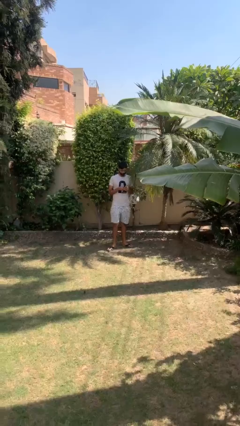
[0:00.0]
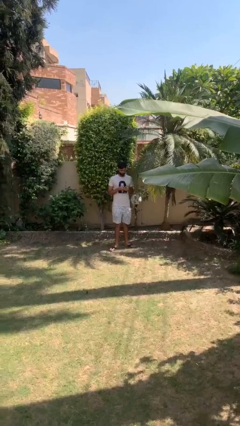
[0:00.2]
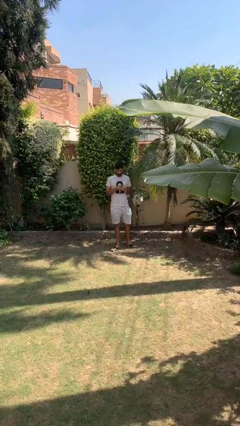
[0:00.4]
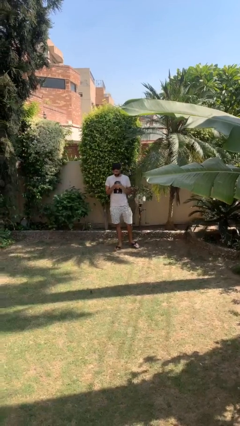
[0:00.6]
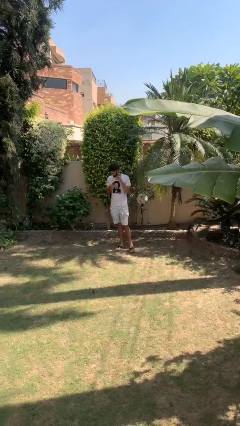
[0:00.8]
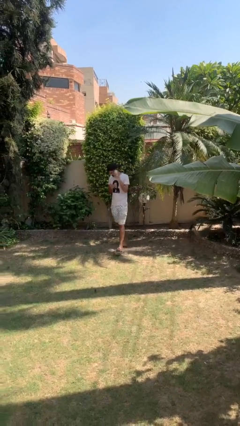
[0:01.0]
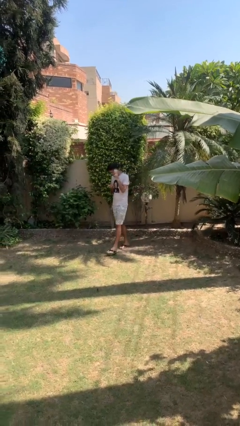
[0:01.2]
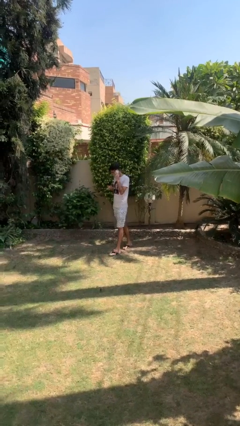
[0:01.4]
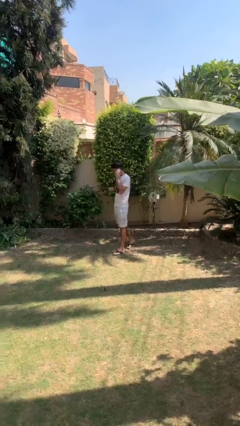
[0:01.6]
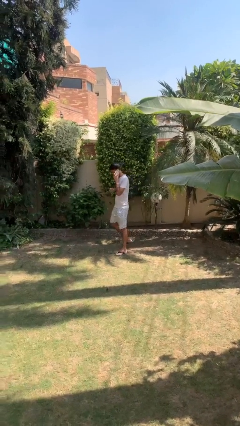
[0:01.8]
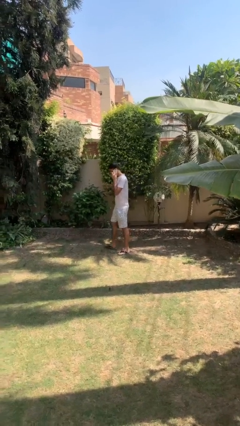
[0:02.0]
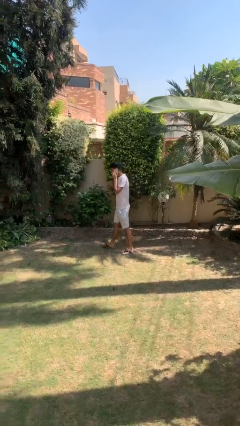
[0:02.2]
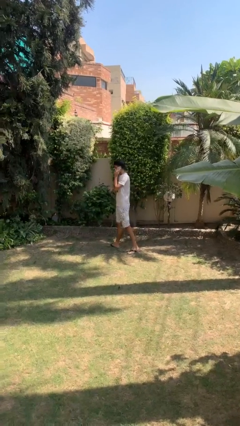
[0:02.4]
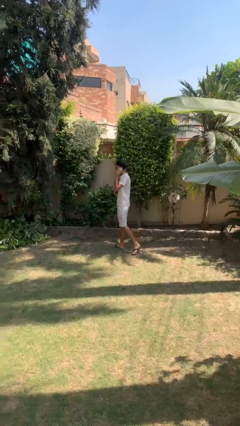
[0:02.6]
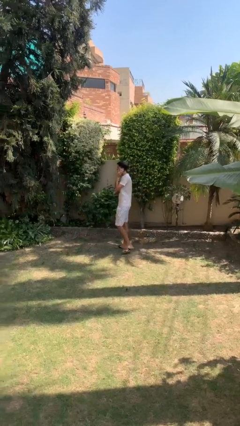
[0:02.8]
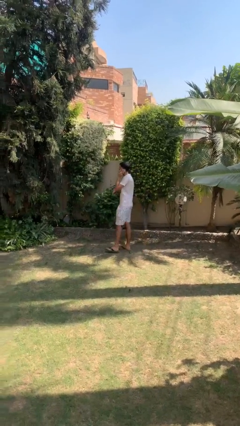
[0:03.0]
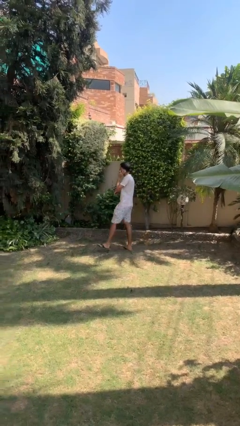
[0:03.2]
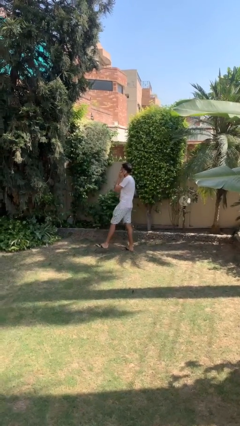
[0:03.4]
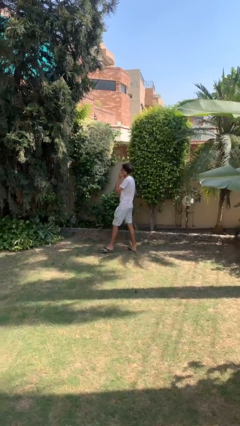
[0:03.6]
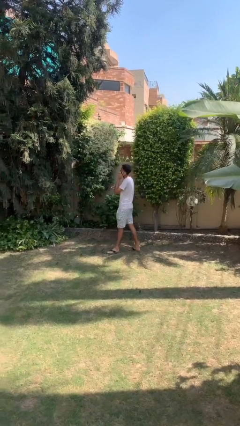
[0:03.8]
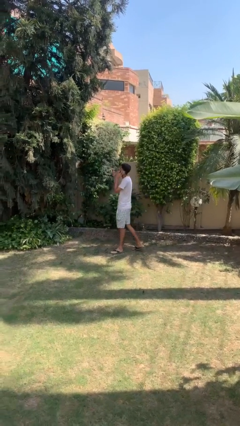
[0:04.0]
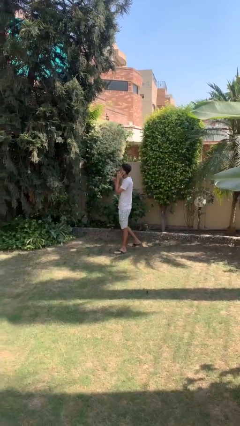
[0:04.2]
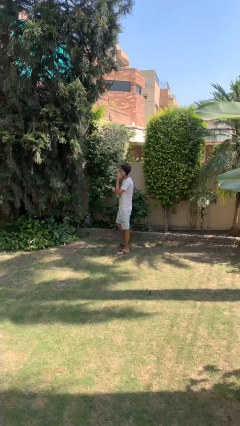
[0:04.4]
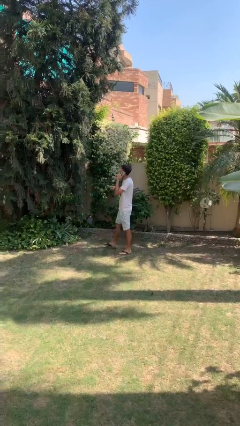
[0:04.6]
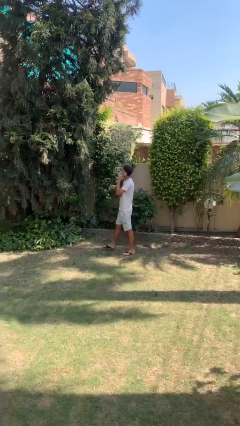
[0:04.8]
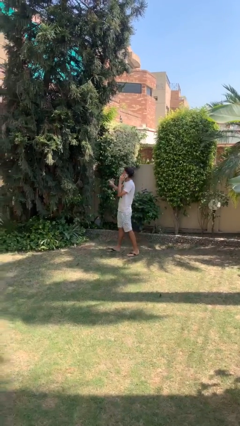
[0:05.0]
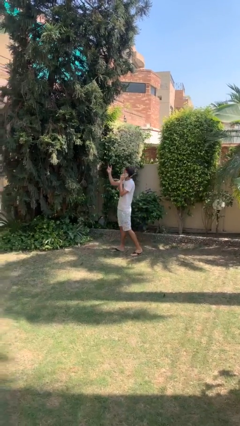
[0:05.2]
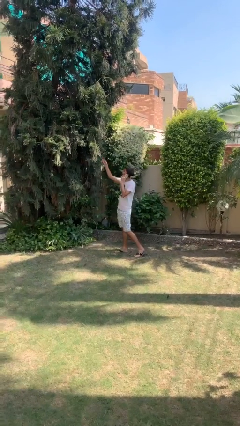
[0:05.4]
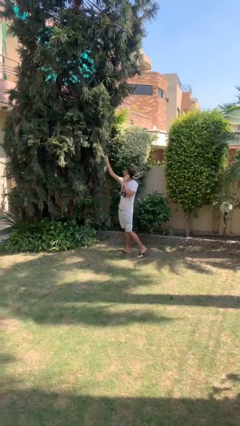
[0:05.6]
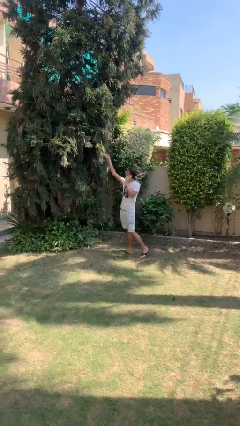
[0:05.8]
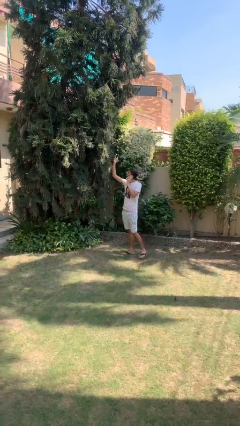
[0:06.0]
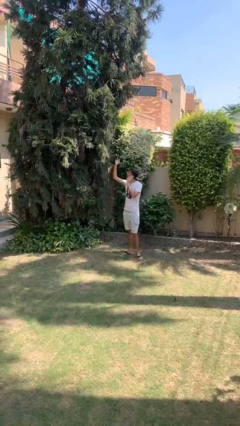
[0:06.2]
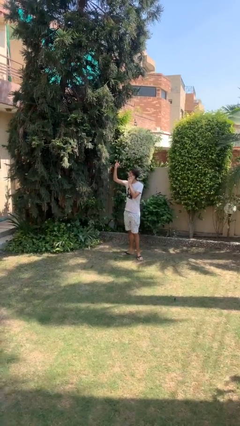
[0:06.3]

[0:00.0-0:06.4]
person talks on phone

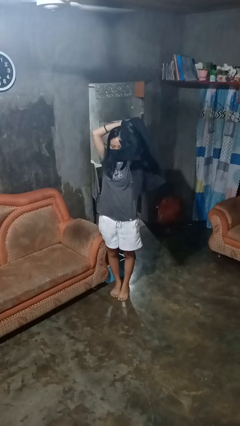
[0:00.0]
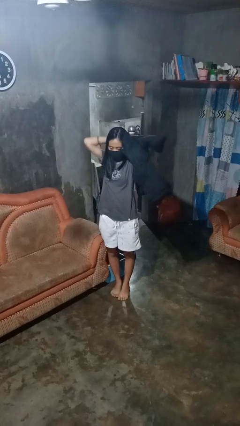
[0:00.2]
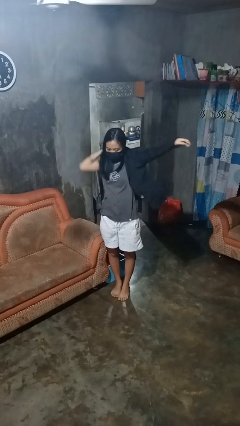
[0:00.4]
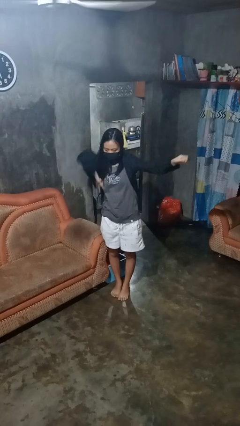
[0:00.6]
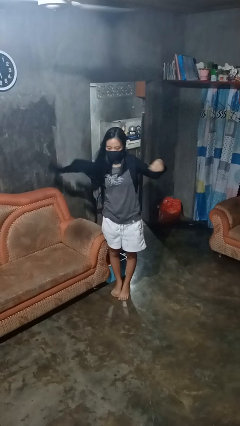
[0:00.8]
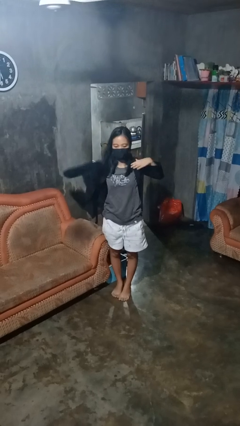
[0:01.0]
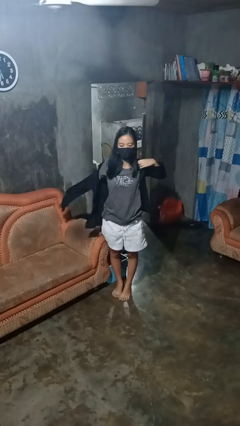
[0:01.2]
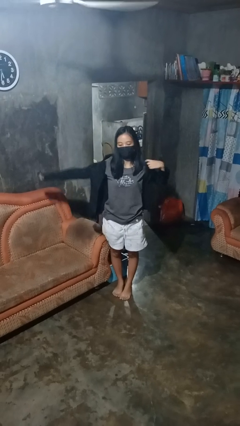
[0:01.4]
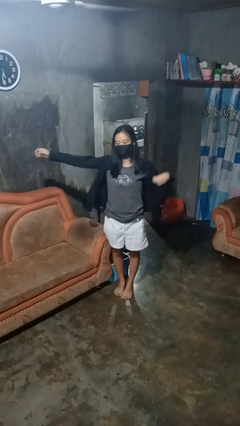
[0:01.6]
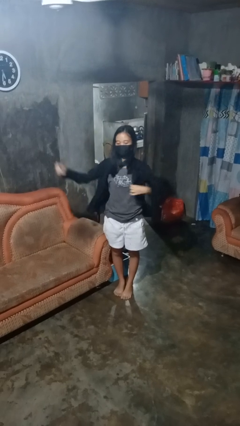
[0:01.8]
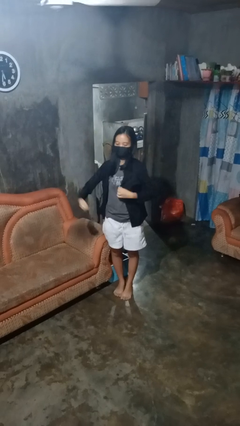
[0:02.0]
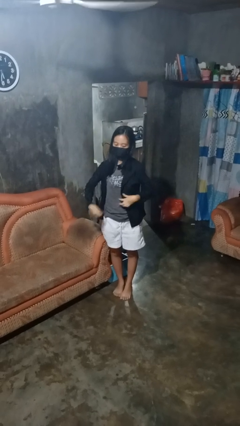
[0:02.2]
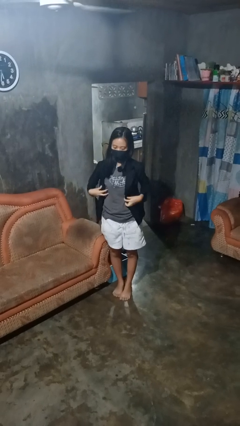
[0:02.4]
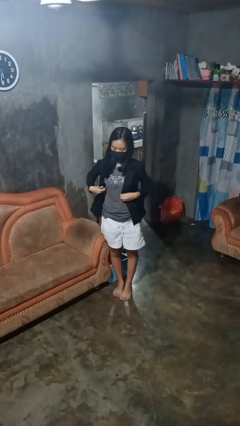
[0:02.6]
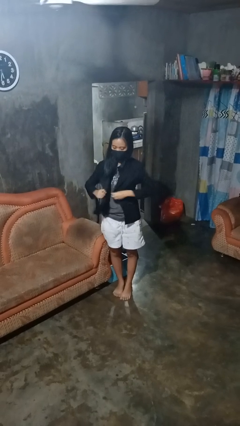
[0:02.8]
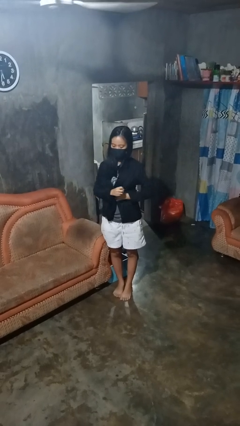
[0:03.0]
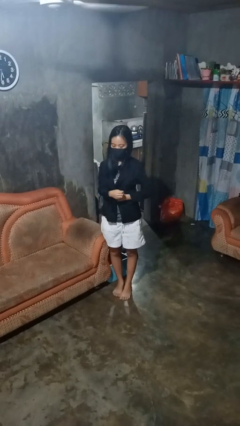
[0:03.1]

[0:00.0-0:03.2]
person puts on shirt

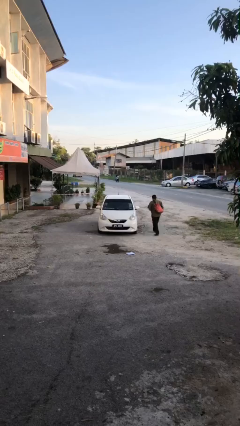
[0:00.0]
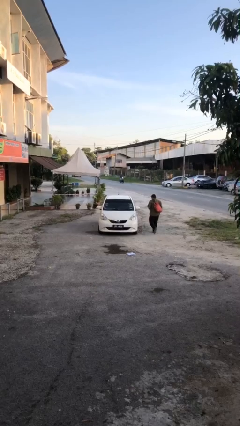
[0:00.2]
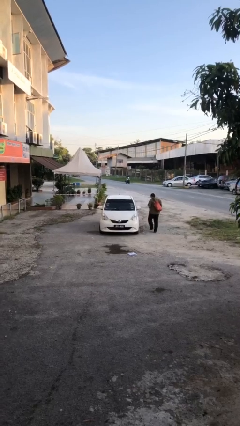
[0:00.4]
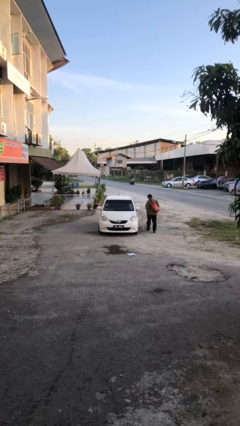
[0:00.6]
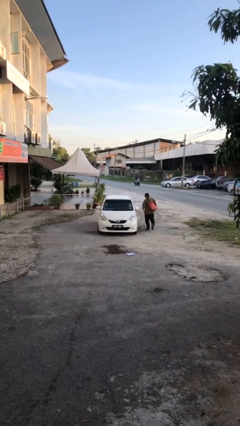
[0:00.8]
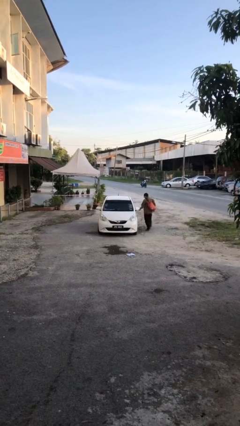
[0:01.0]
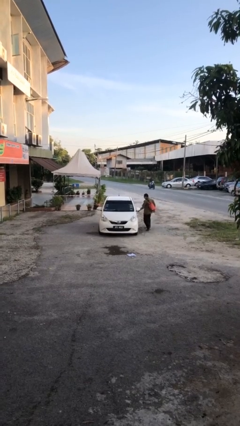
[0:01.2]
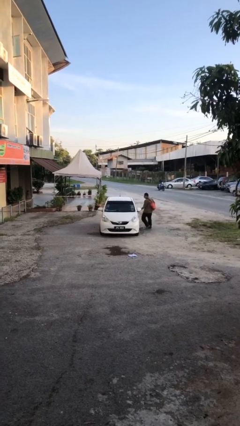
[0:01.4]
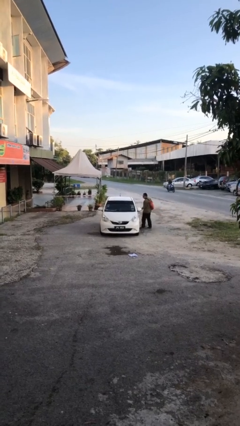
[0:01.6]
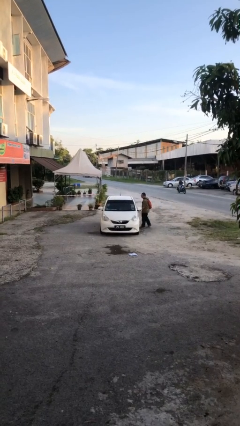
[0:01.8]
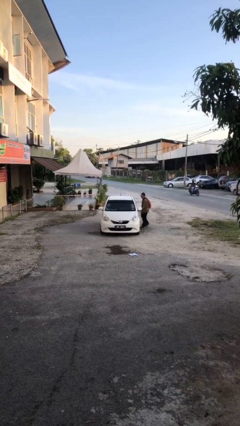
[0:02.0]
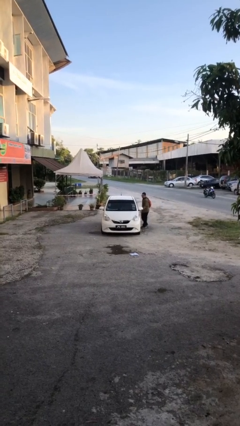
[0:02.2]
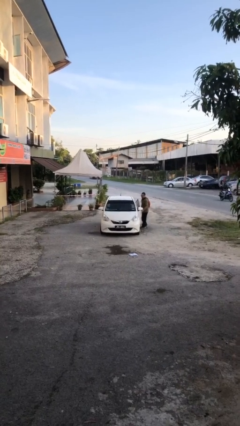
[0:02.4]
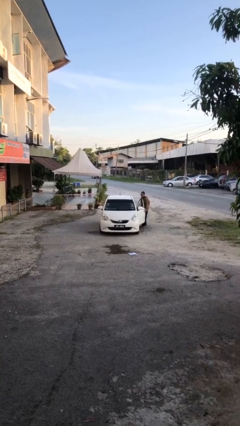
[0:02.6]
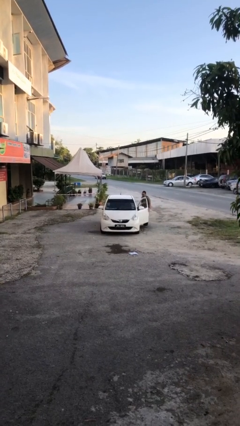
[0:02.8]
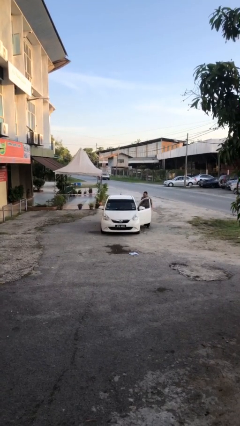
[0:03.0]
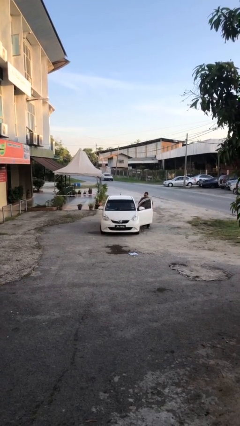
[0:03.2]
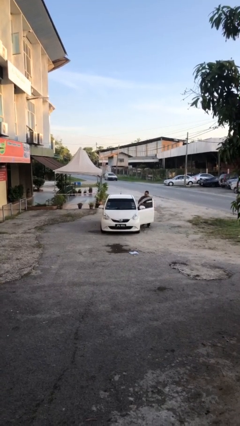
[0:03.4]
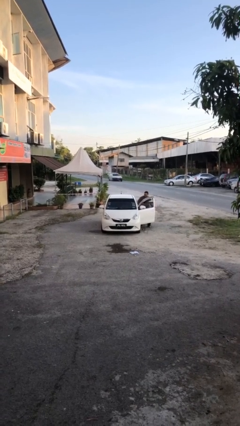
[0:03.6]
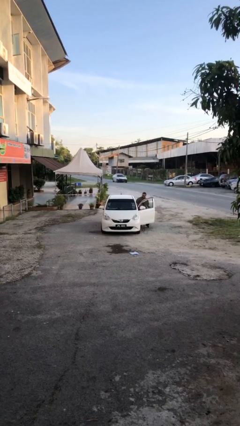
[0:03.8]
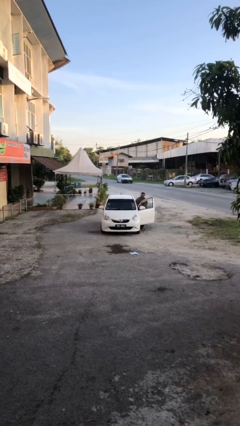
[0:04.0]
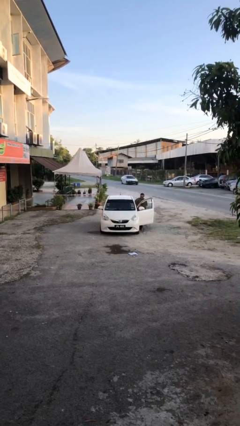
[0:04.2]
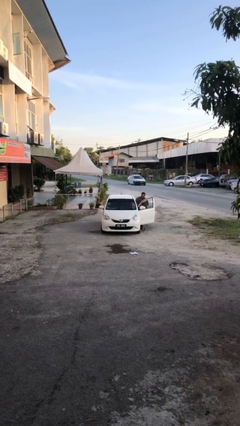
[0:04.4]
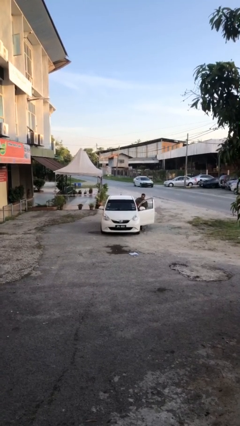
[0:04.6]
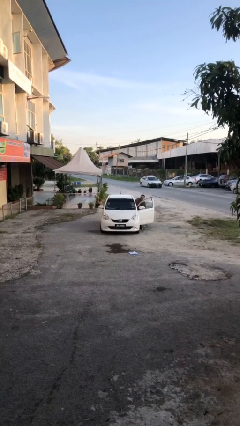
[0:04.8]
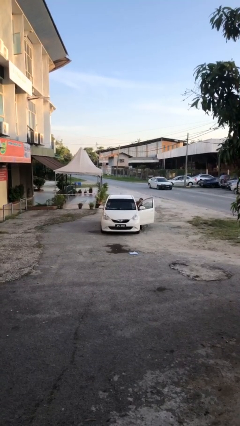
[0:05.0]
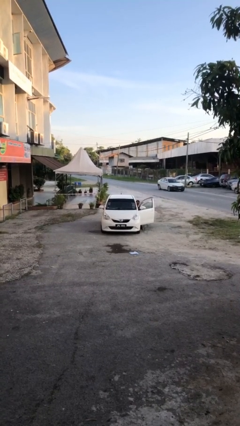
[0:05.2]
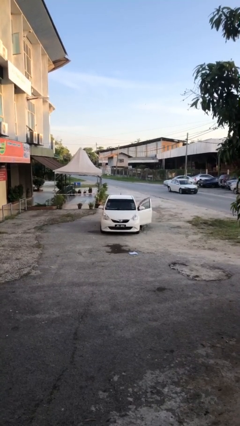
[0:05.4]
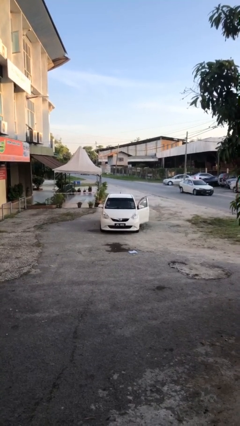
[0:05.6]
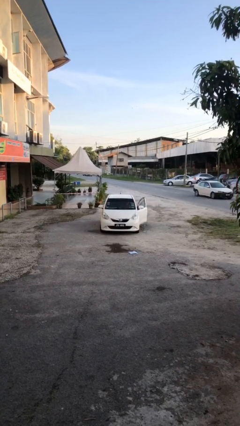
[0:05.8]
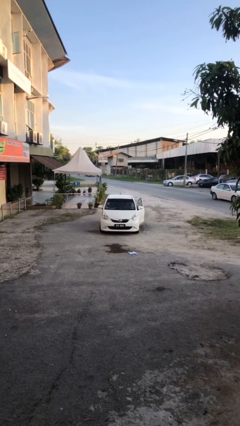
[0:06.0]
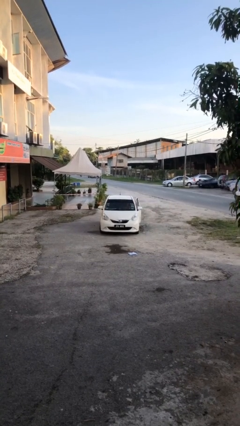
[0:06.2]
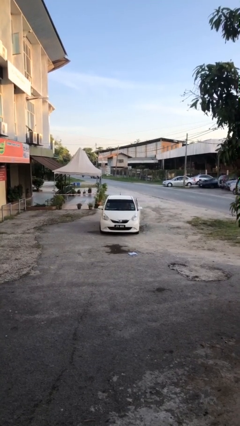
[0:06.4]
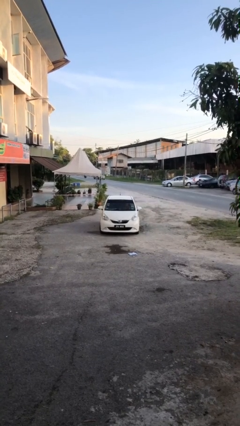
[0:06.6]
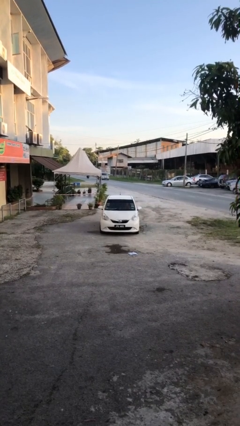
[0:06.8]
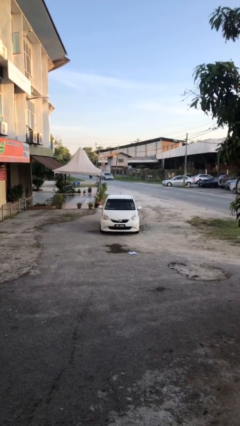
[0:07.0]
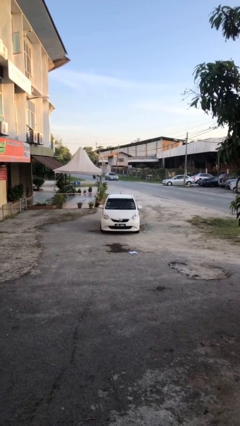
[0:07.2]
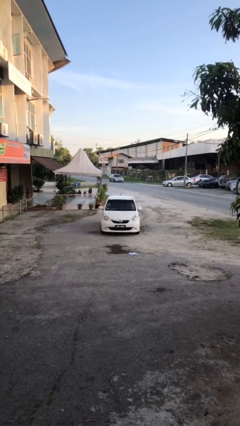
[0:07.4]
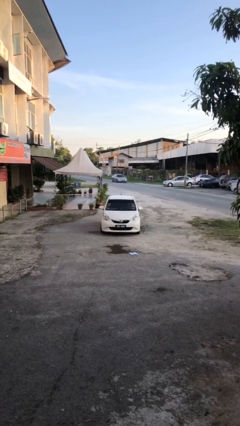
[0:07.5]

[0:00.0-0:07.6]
car picks up person

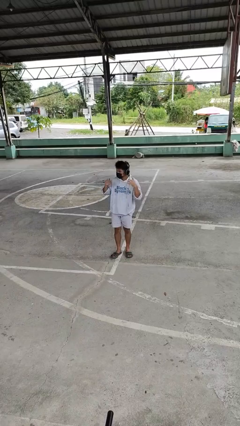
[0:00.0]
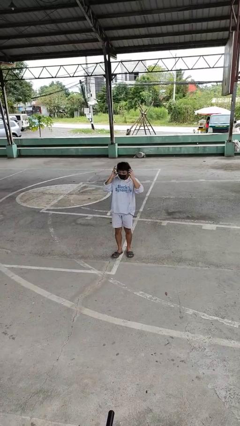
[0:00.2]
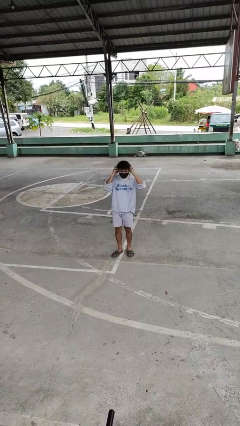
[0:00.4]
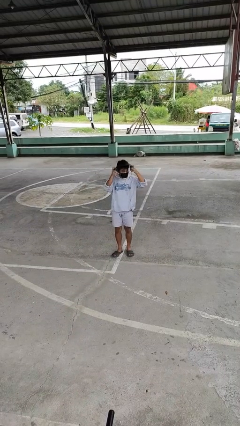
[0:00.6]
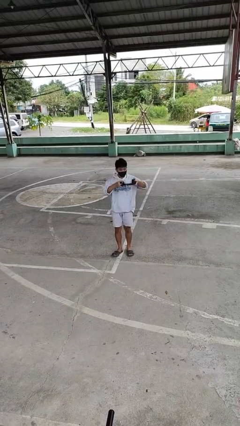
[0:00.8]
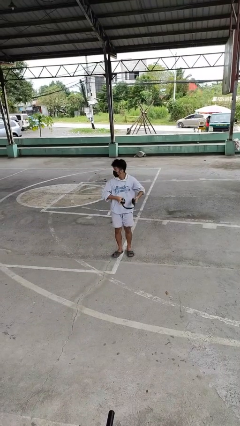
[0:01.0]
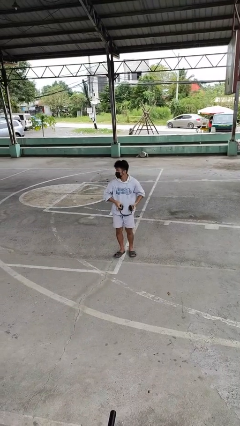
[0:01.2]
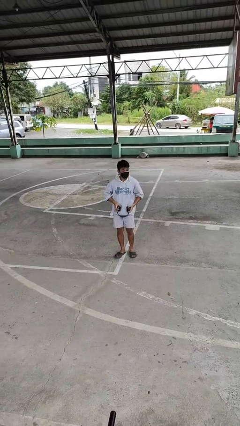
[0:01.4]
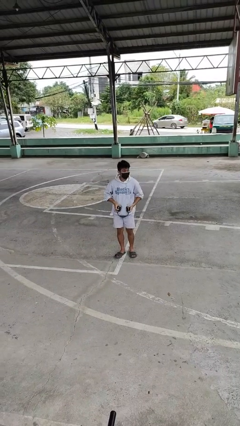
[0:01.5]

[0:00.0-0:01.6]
person takes off headphones
